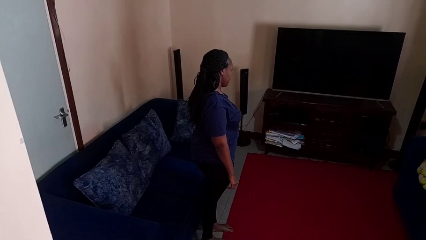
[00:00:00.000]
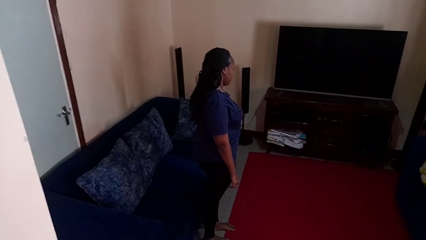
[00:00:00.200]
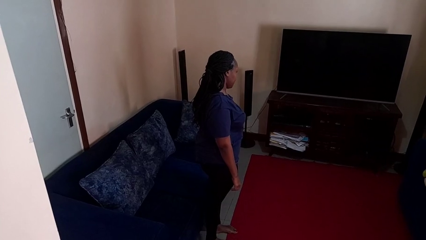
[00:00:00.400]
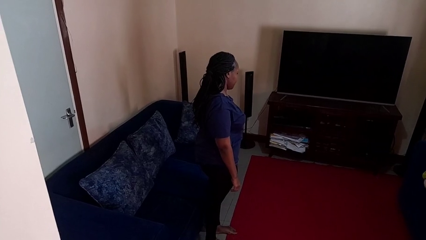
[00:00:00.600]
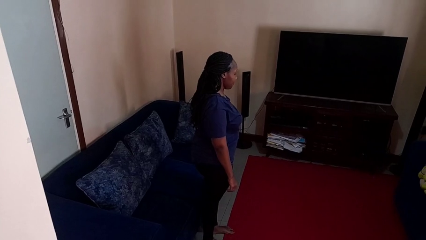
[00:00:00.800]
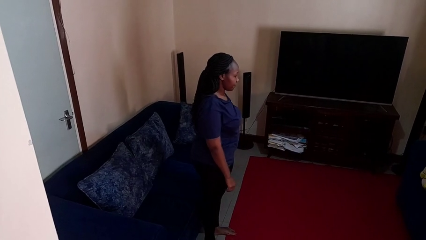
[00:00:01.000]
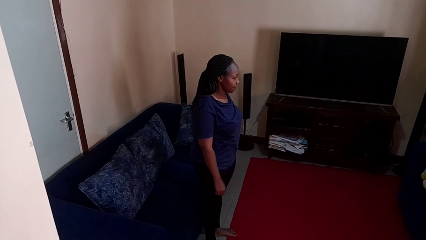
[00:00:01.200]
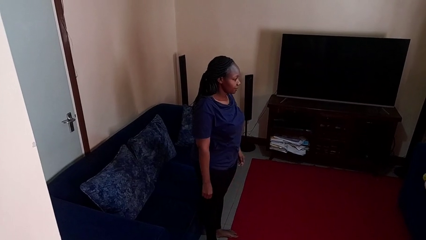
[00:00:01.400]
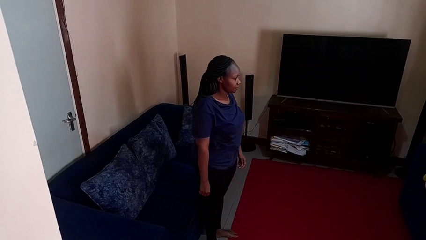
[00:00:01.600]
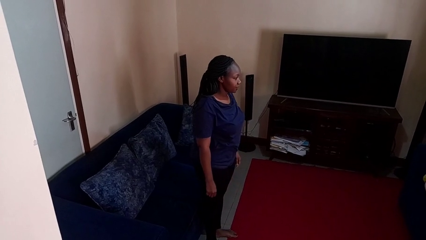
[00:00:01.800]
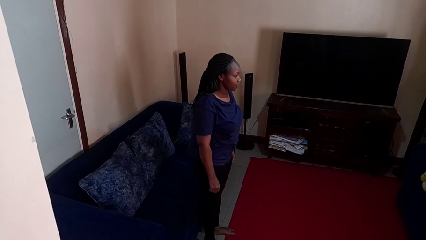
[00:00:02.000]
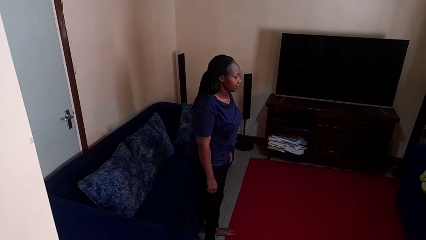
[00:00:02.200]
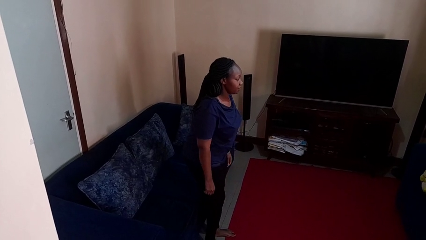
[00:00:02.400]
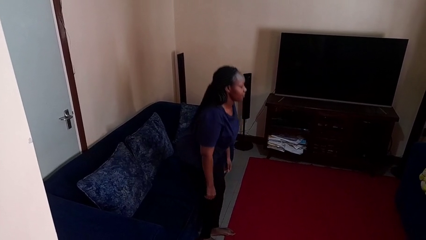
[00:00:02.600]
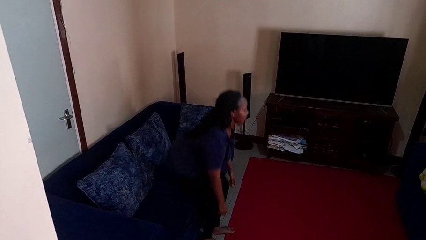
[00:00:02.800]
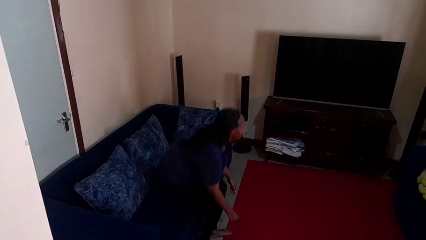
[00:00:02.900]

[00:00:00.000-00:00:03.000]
person stands up

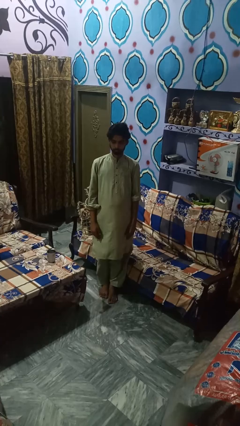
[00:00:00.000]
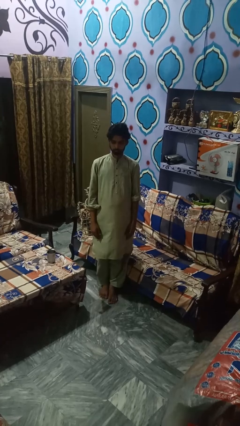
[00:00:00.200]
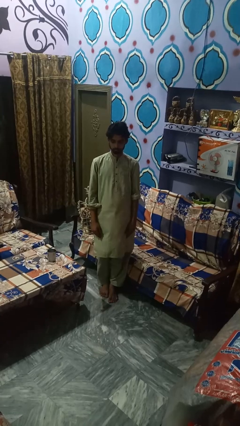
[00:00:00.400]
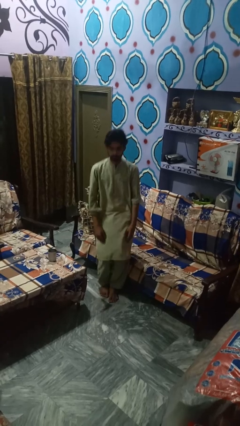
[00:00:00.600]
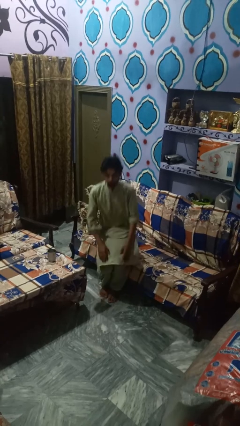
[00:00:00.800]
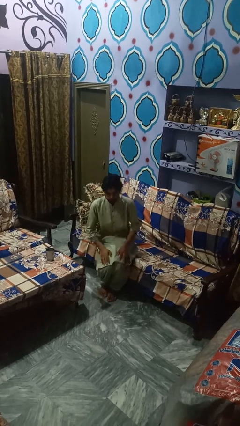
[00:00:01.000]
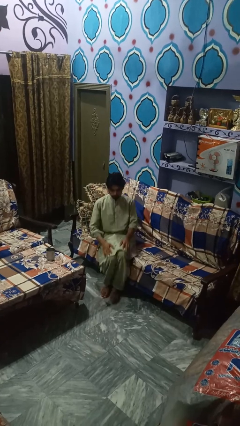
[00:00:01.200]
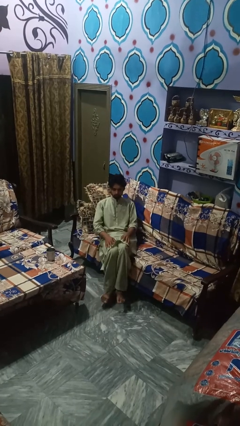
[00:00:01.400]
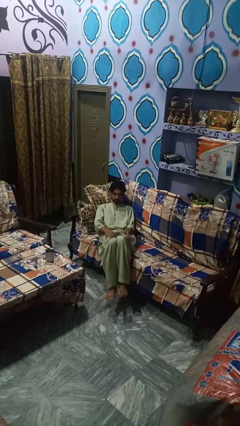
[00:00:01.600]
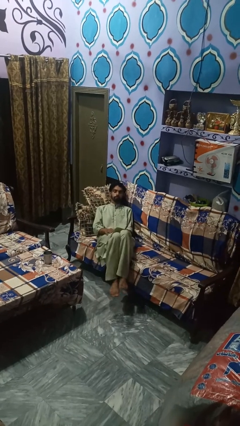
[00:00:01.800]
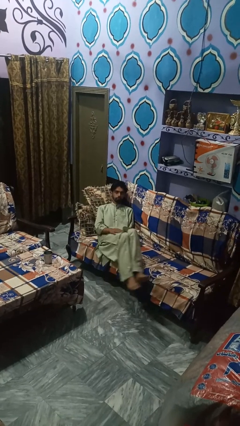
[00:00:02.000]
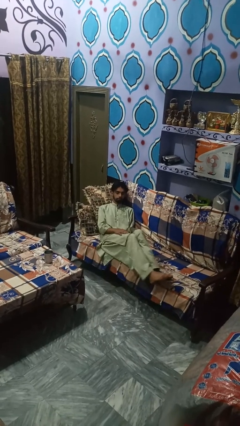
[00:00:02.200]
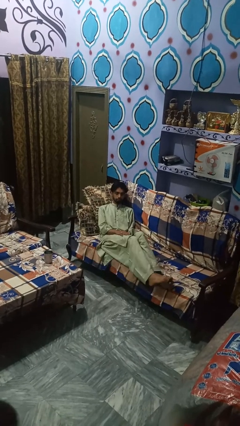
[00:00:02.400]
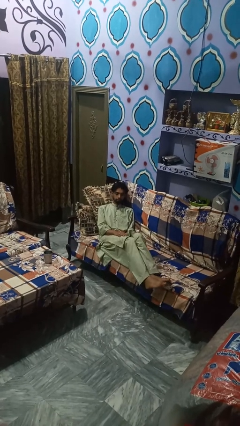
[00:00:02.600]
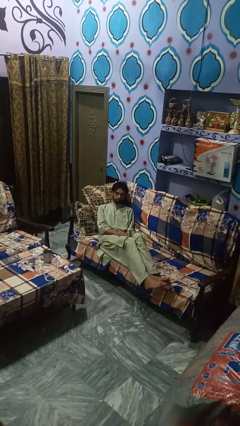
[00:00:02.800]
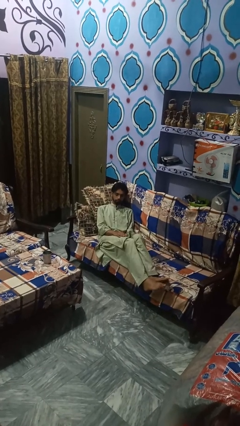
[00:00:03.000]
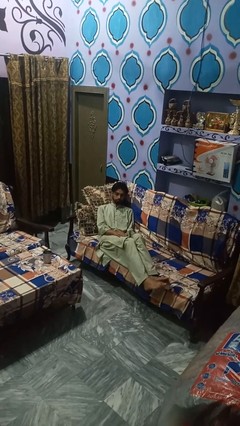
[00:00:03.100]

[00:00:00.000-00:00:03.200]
person lies down on couch

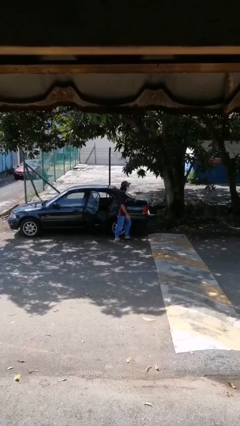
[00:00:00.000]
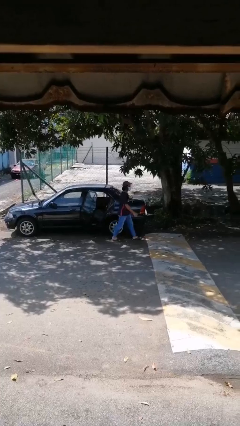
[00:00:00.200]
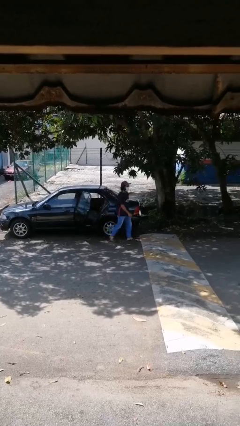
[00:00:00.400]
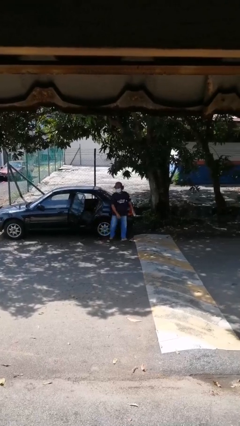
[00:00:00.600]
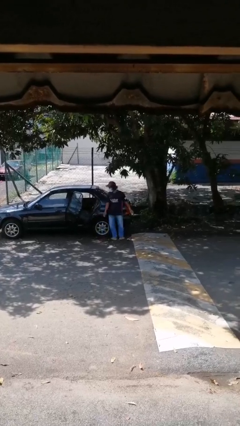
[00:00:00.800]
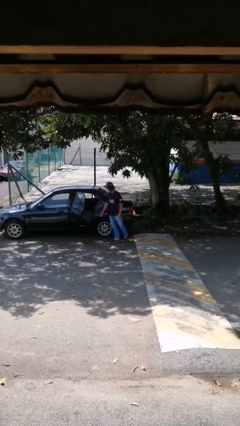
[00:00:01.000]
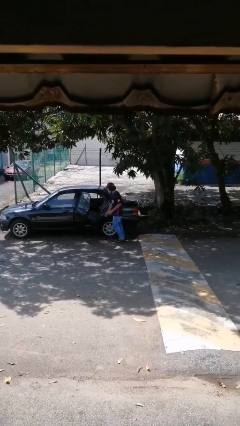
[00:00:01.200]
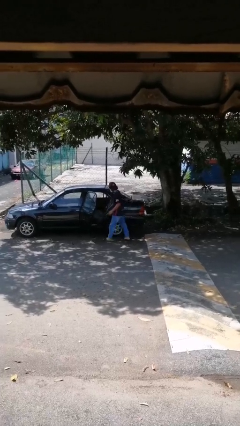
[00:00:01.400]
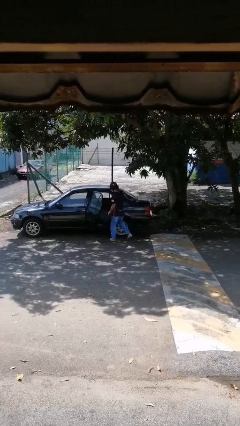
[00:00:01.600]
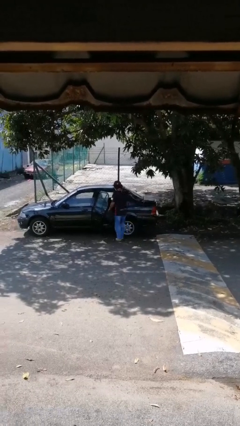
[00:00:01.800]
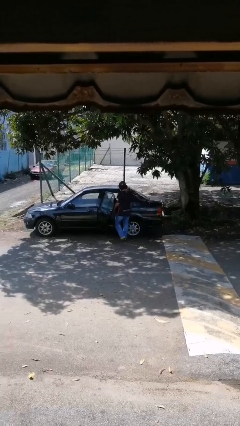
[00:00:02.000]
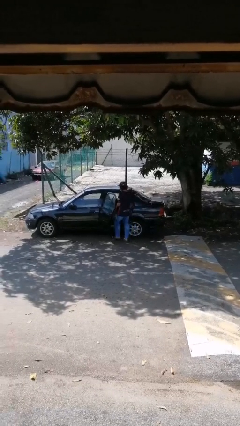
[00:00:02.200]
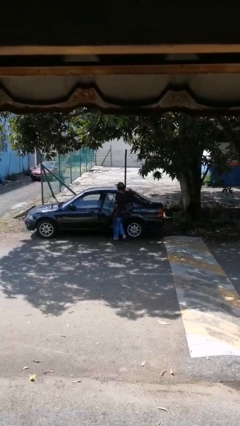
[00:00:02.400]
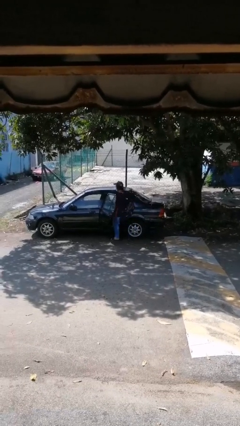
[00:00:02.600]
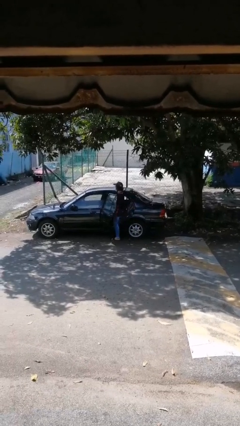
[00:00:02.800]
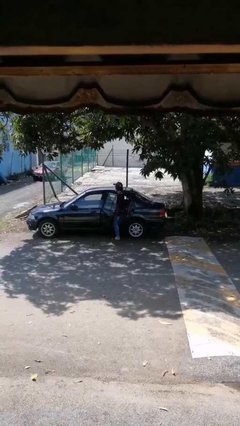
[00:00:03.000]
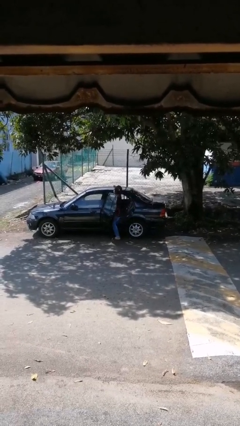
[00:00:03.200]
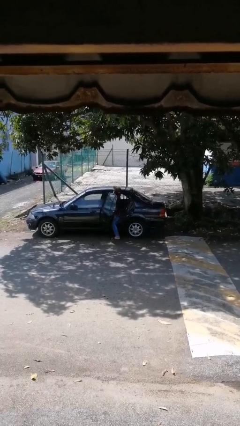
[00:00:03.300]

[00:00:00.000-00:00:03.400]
person enters car

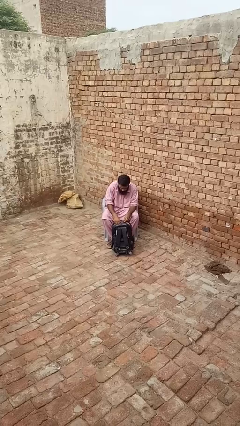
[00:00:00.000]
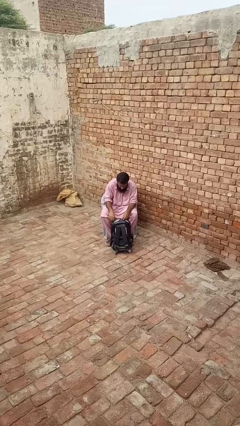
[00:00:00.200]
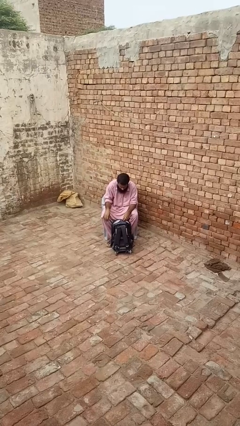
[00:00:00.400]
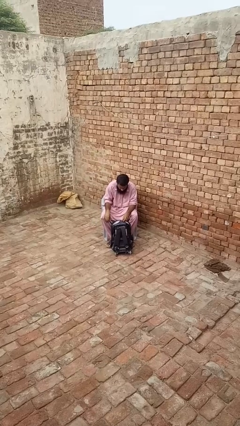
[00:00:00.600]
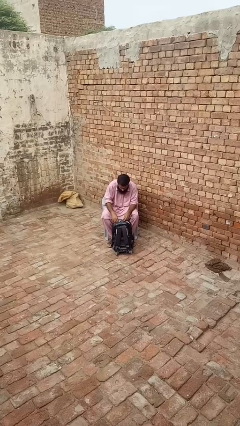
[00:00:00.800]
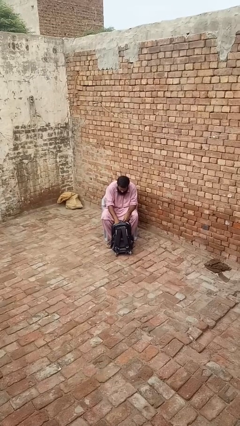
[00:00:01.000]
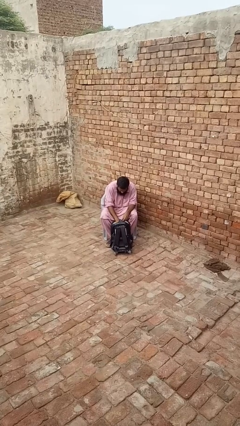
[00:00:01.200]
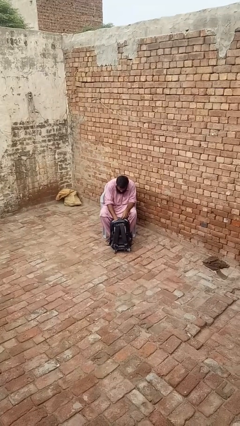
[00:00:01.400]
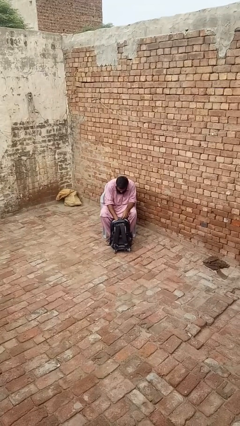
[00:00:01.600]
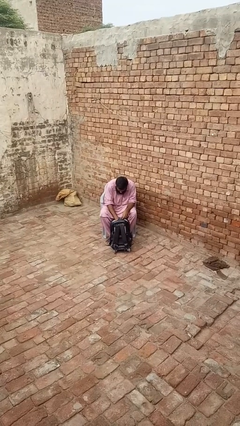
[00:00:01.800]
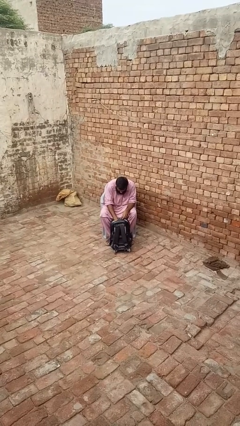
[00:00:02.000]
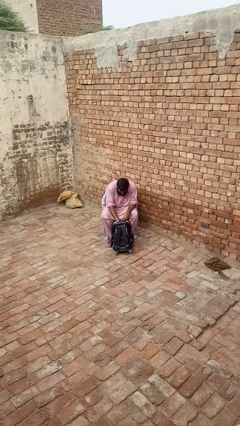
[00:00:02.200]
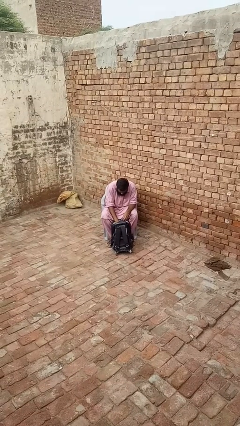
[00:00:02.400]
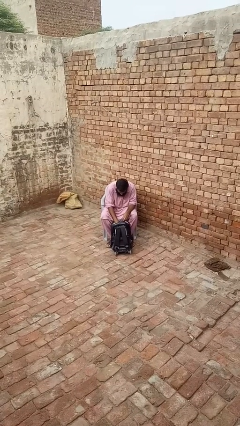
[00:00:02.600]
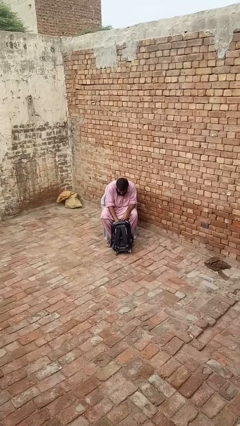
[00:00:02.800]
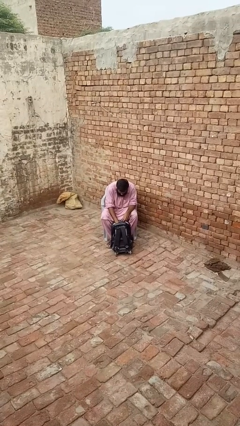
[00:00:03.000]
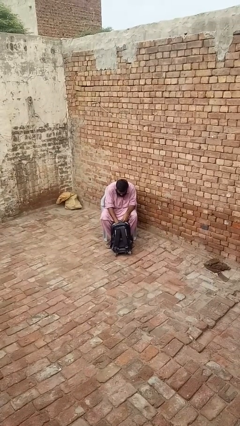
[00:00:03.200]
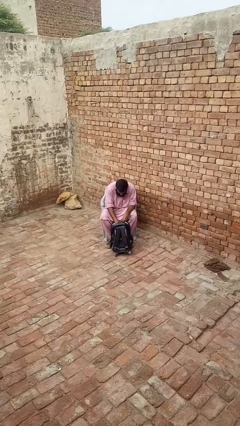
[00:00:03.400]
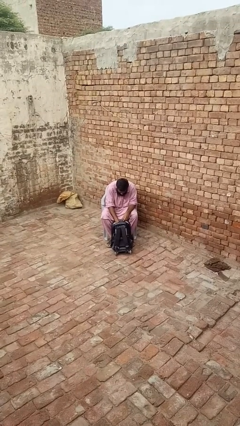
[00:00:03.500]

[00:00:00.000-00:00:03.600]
person searches in backpack

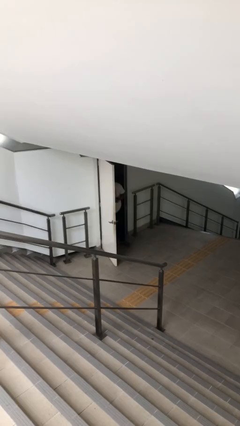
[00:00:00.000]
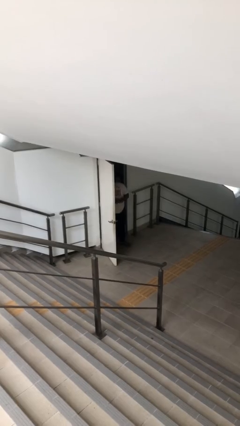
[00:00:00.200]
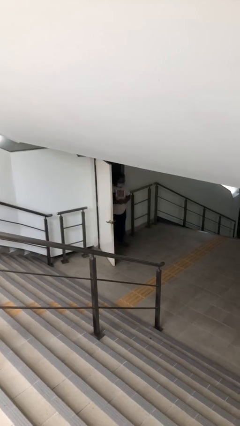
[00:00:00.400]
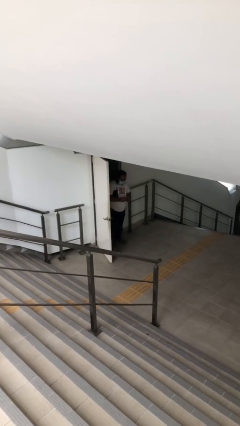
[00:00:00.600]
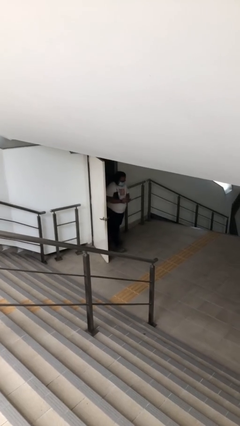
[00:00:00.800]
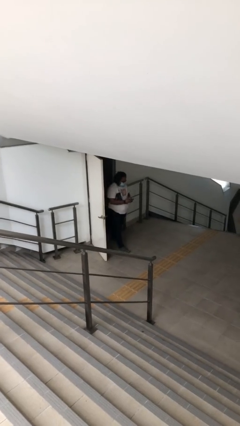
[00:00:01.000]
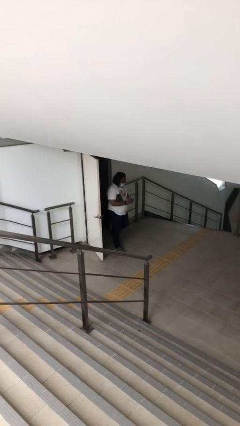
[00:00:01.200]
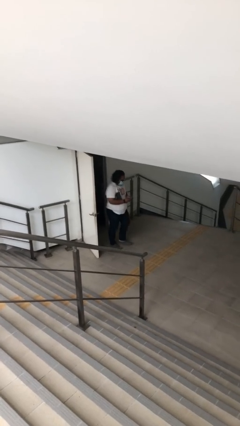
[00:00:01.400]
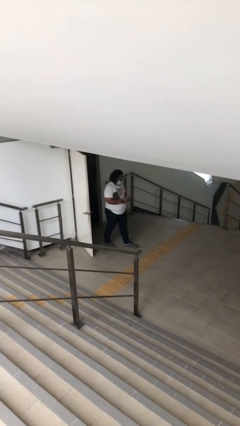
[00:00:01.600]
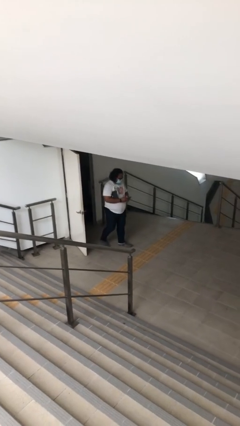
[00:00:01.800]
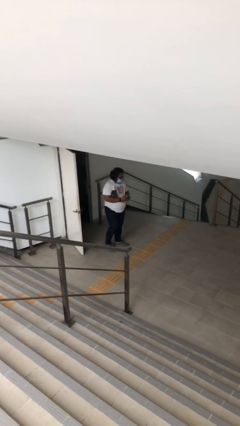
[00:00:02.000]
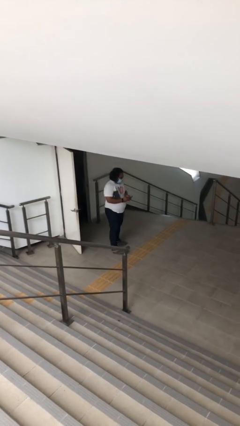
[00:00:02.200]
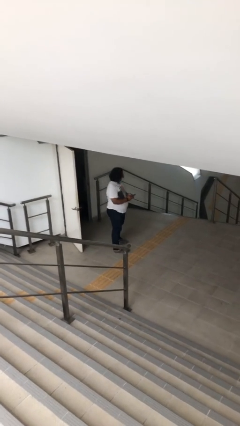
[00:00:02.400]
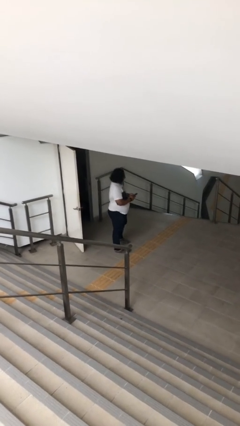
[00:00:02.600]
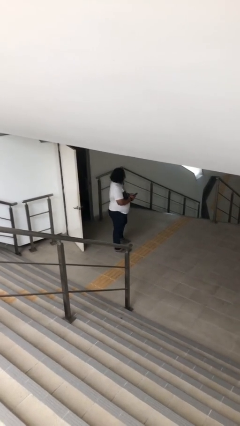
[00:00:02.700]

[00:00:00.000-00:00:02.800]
person enters scene through structure

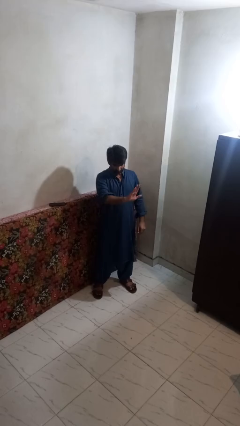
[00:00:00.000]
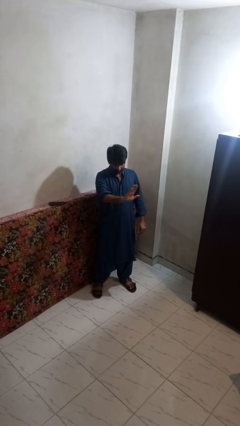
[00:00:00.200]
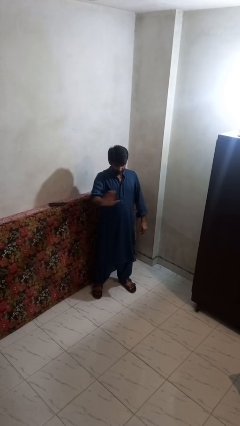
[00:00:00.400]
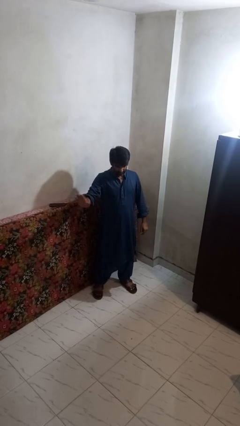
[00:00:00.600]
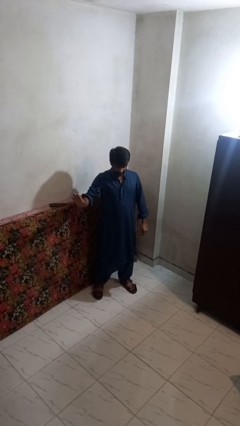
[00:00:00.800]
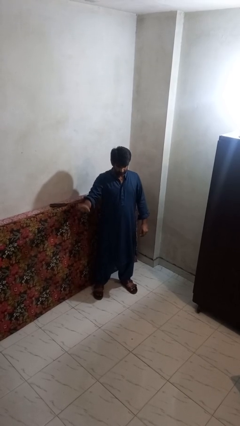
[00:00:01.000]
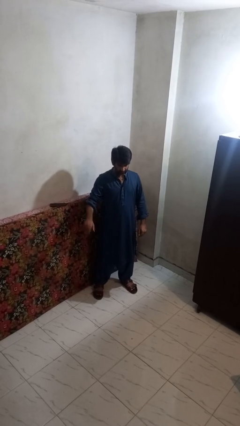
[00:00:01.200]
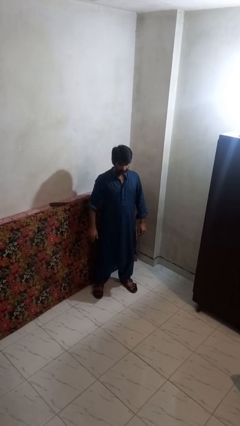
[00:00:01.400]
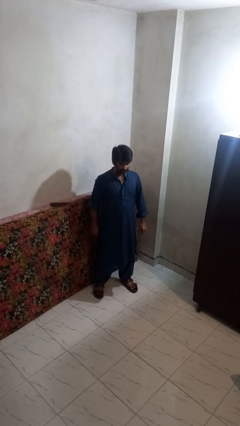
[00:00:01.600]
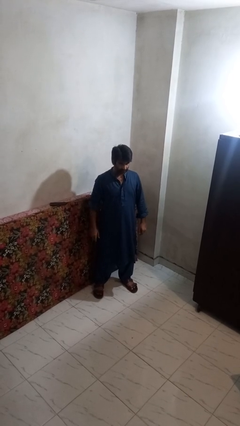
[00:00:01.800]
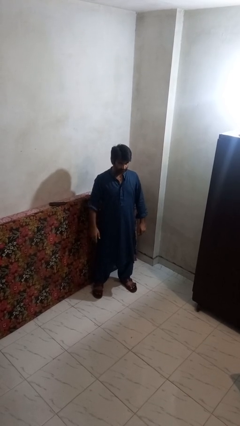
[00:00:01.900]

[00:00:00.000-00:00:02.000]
person gestures swipe right
